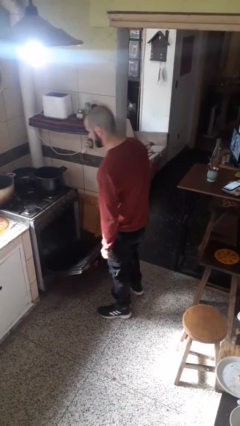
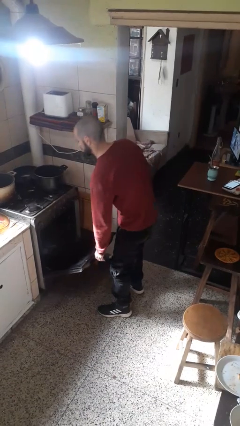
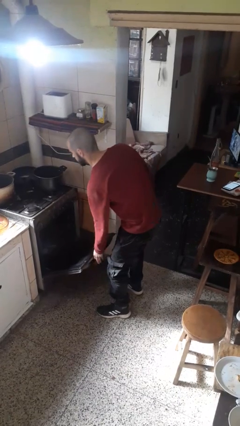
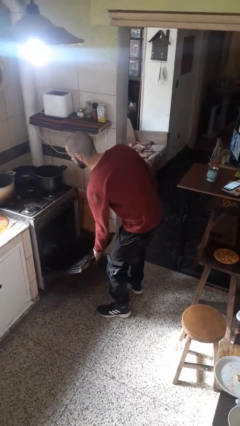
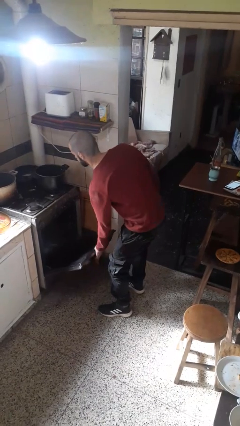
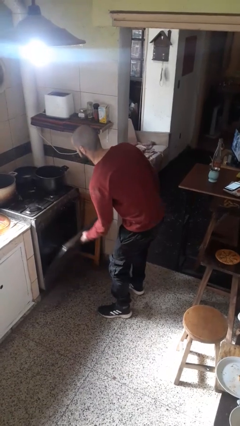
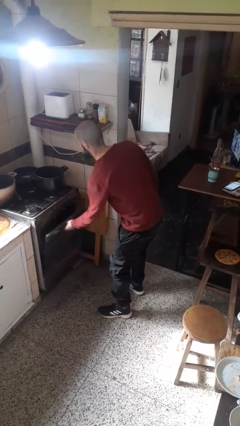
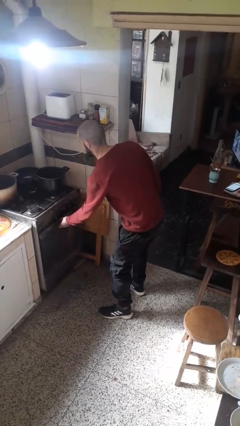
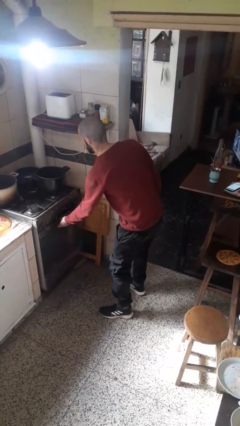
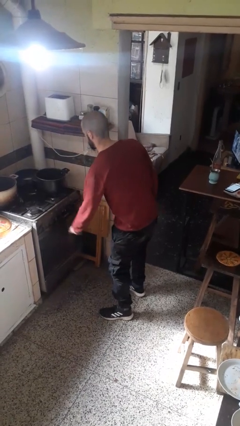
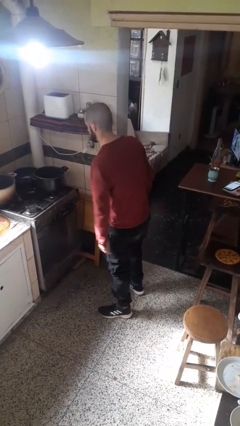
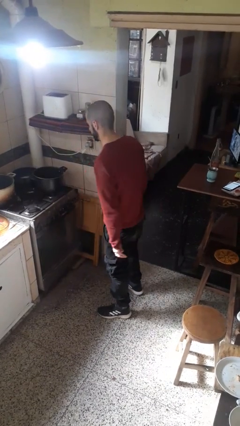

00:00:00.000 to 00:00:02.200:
person closes oven door

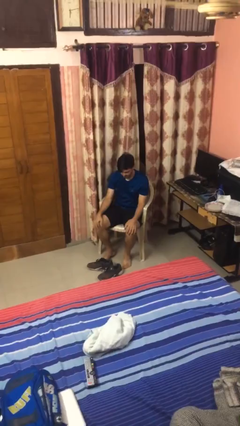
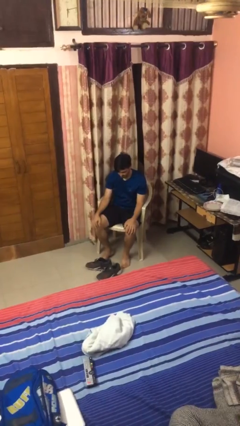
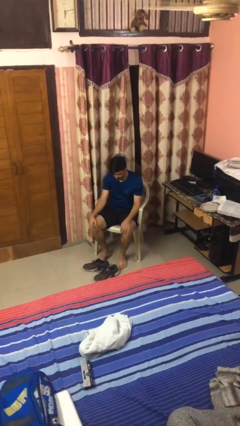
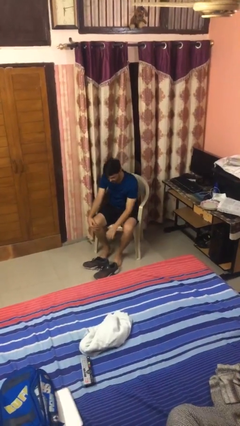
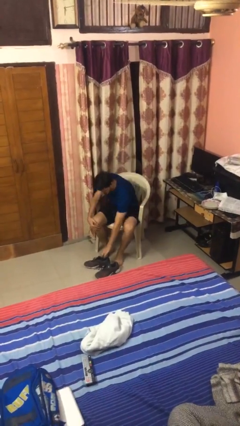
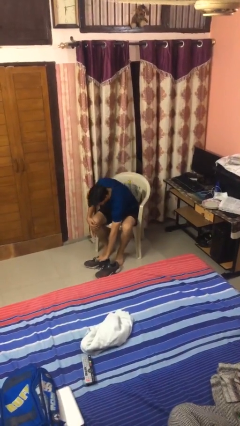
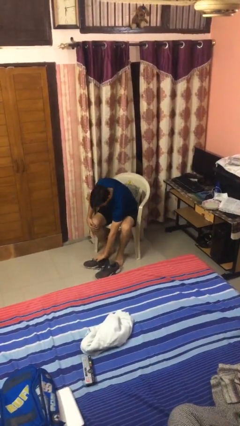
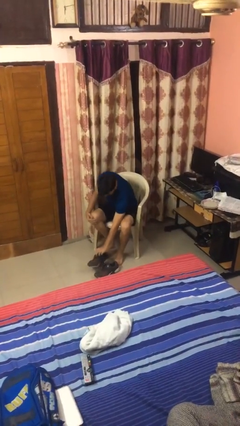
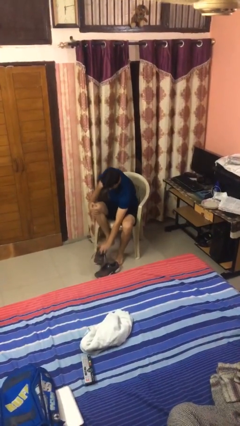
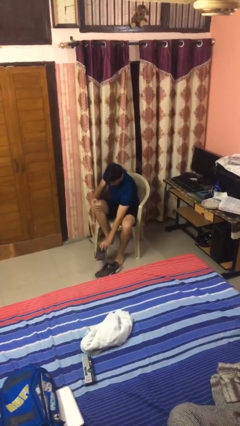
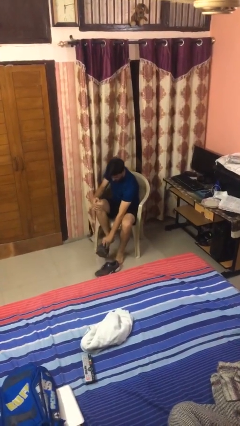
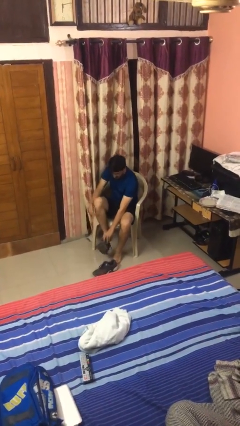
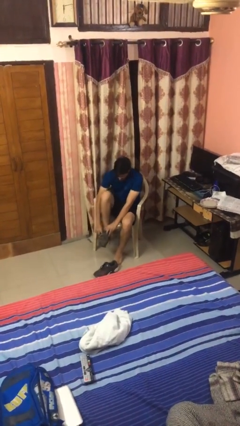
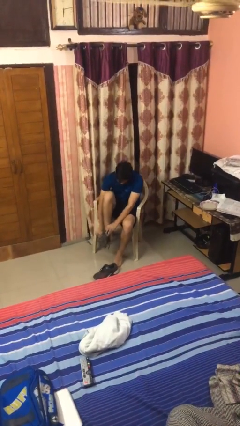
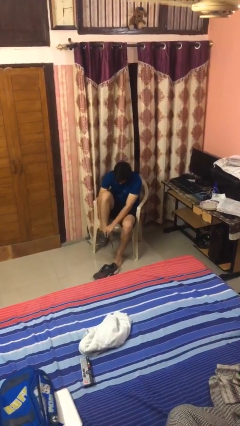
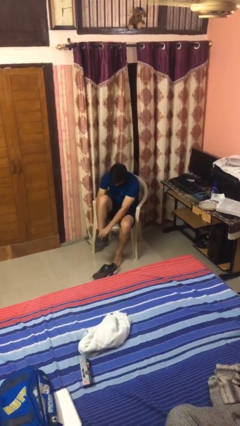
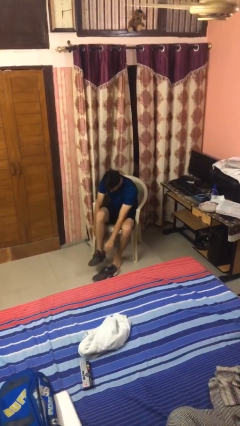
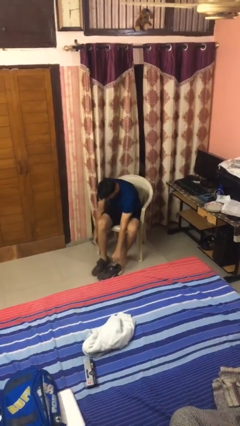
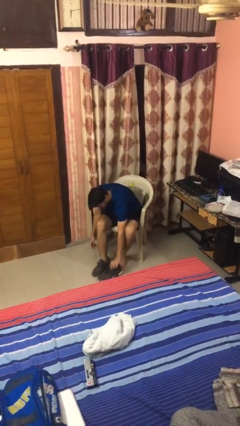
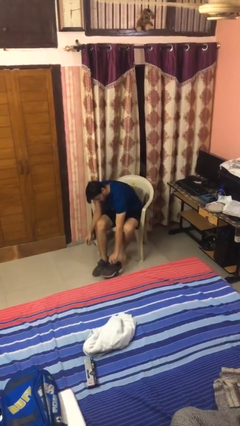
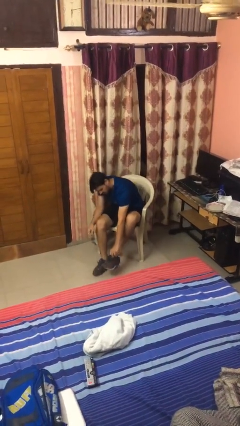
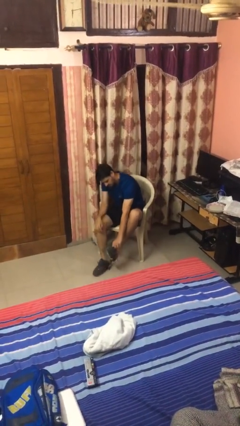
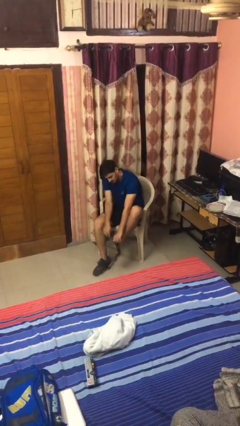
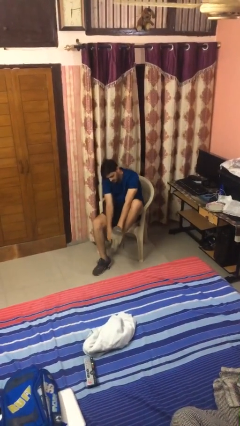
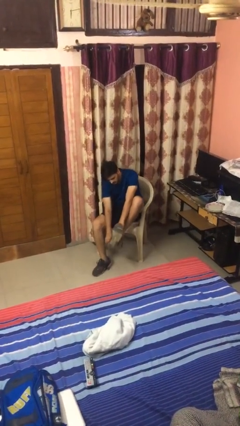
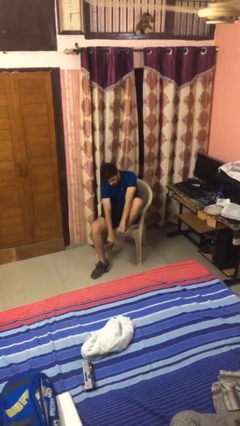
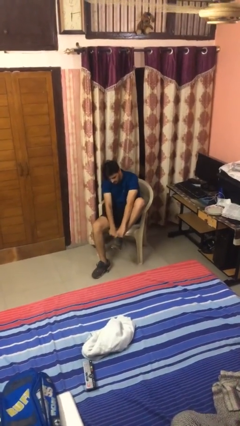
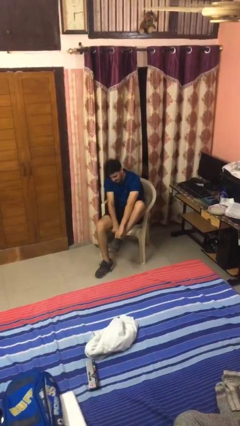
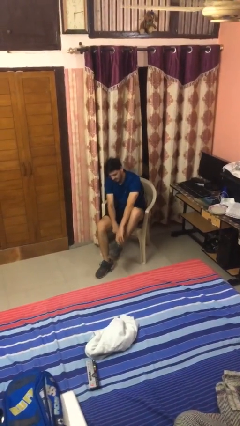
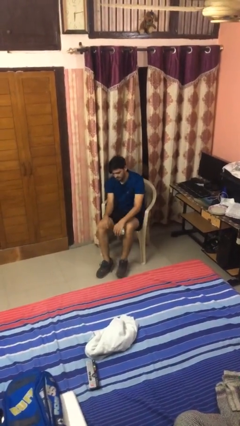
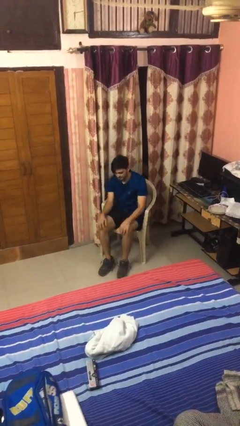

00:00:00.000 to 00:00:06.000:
person puts on boots

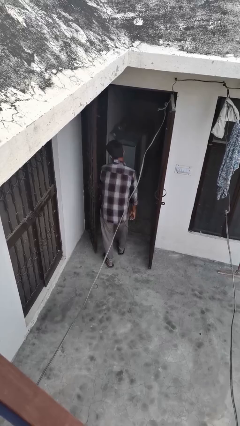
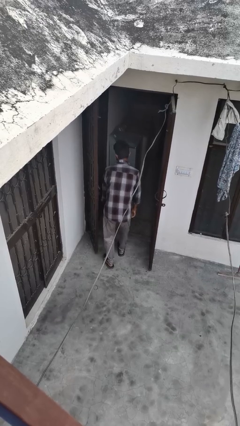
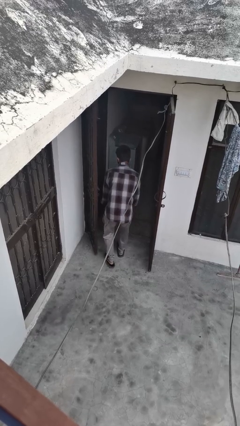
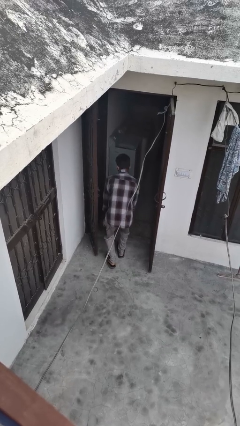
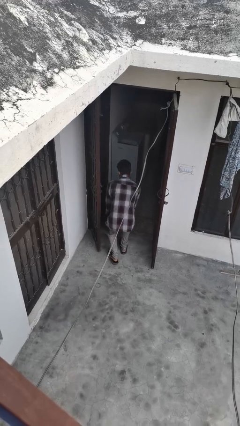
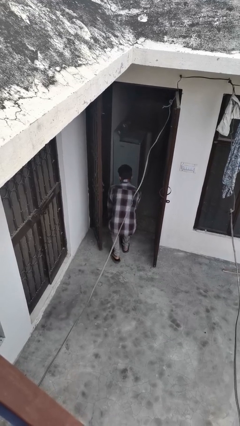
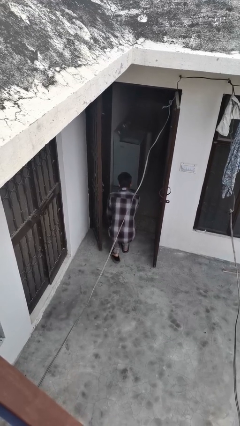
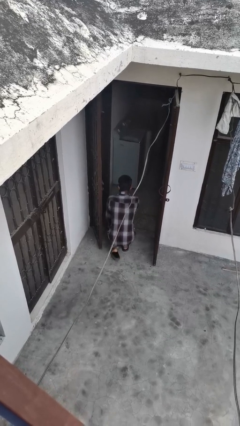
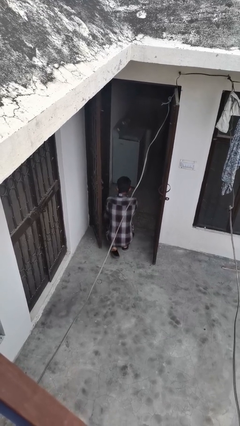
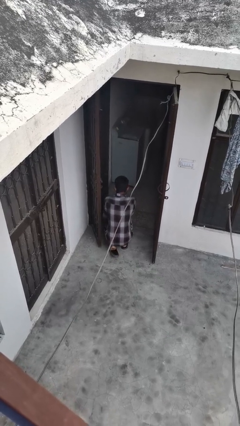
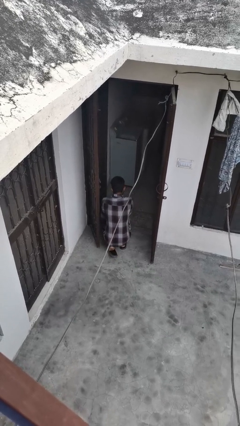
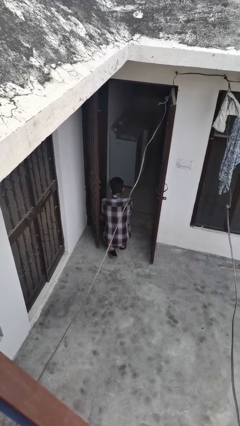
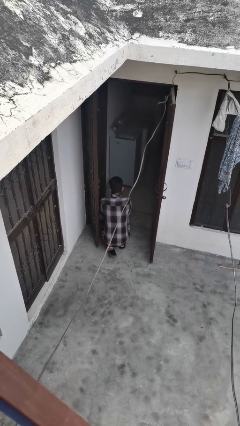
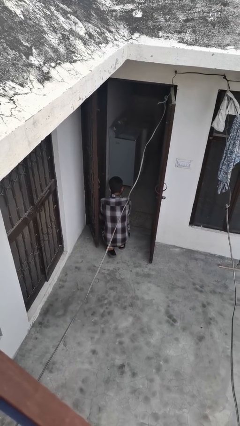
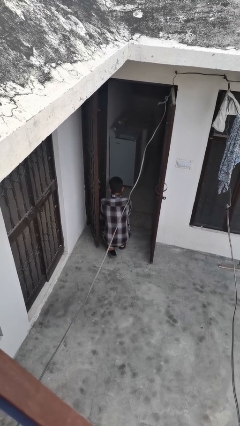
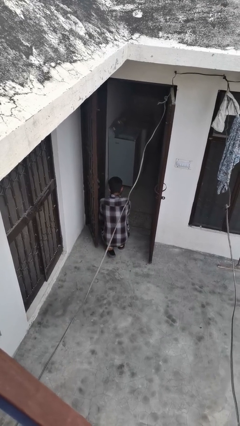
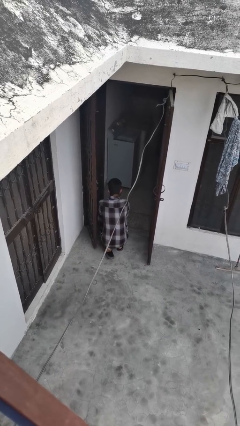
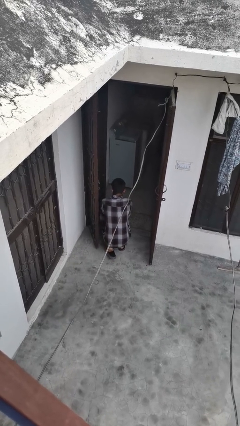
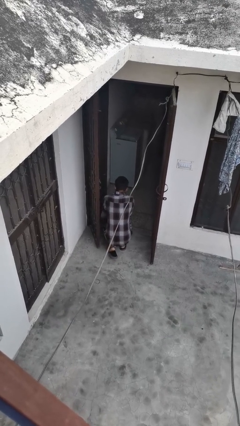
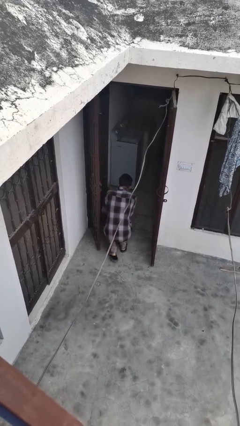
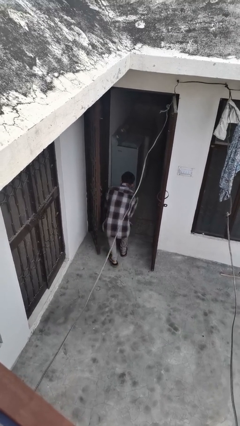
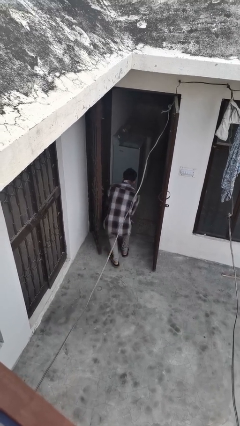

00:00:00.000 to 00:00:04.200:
person bumps into wall

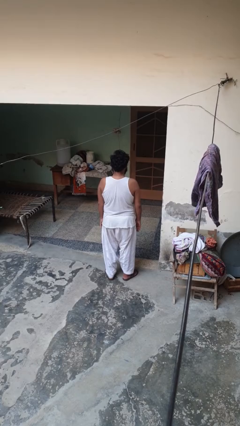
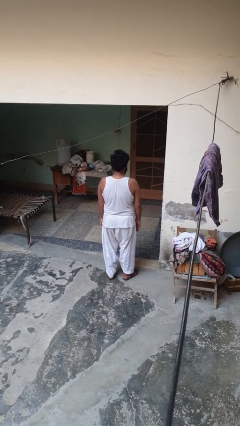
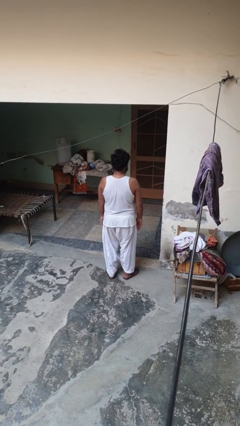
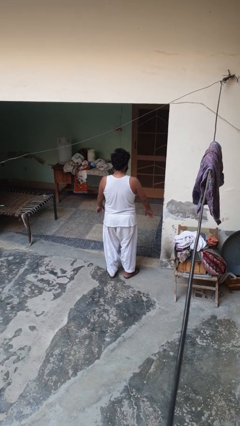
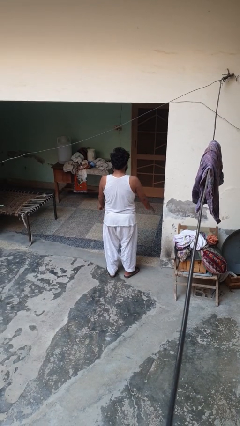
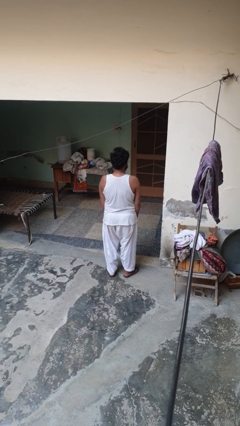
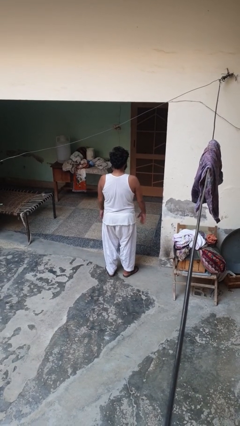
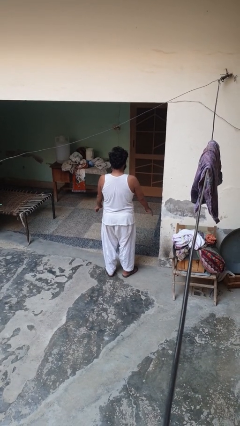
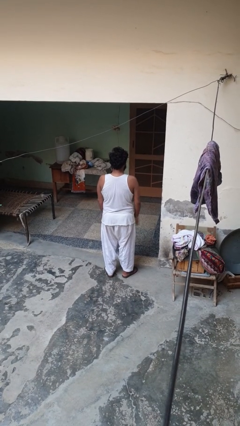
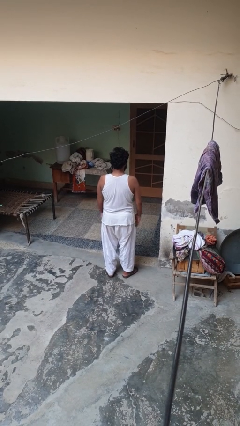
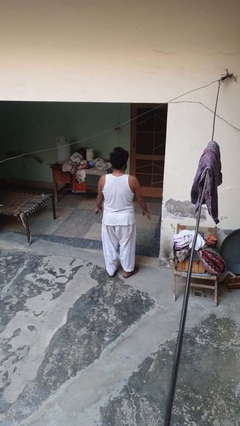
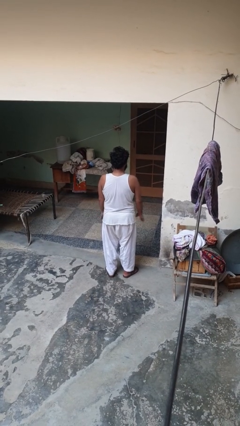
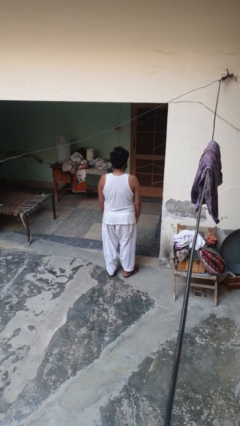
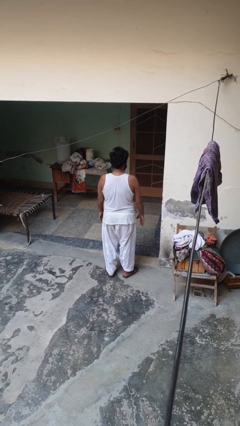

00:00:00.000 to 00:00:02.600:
person slaps hands on thighs

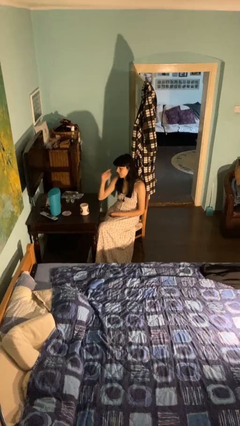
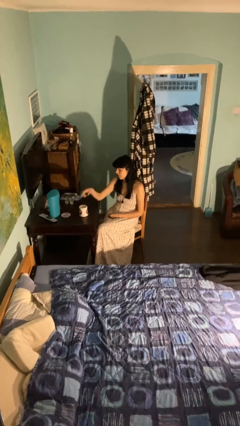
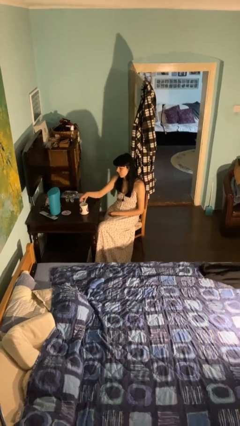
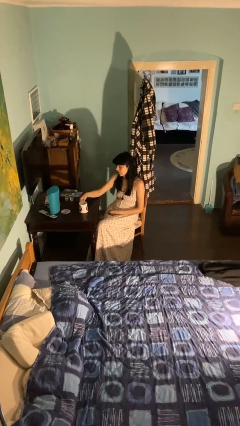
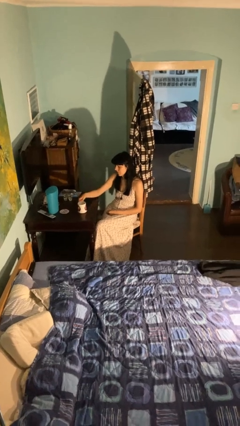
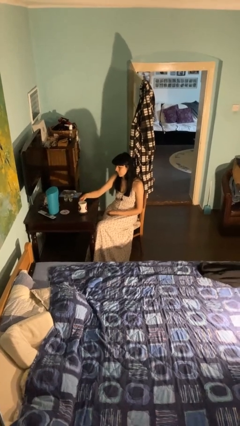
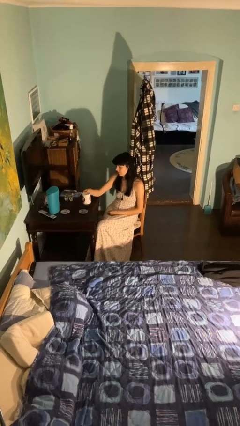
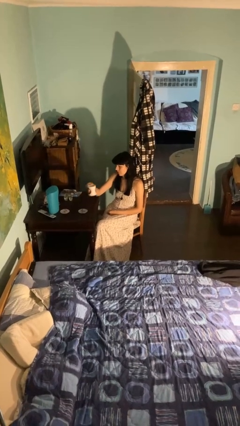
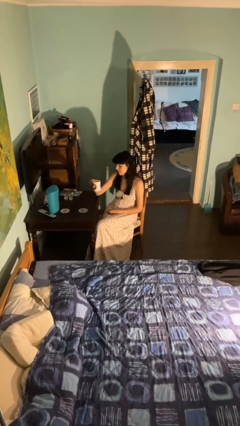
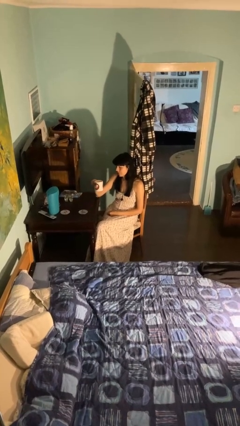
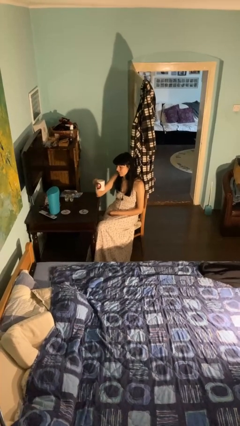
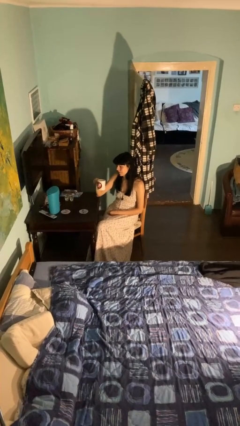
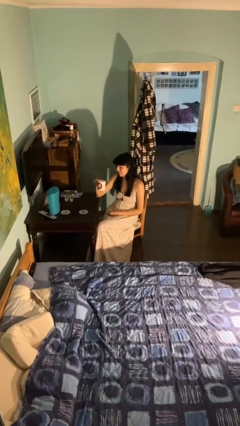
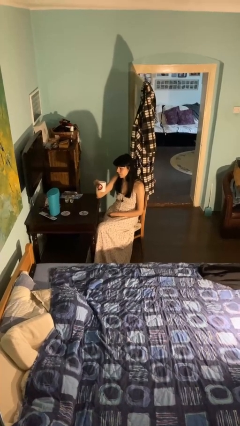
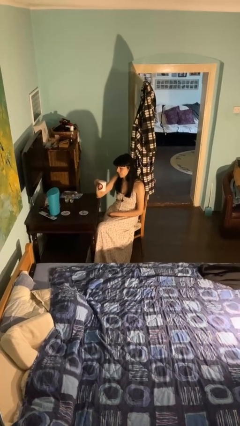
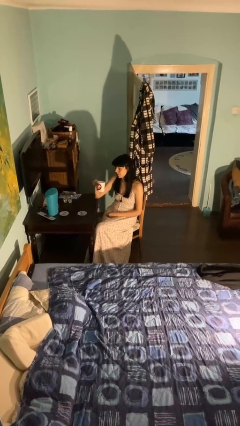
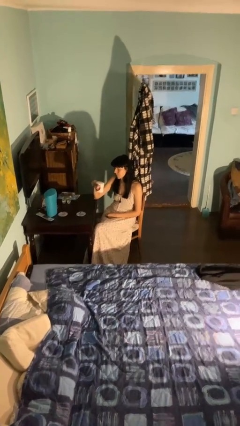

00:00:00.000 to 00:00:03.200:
person picks up object from table
